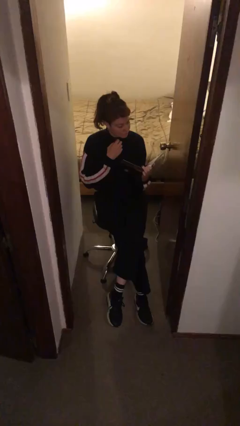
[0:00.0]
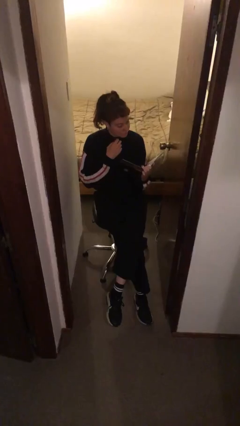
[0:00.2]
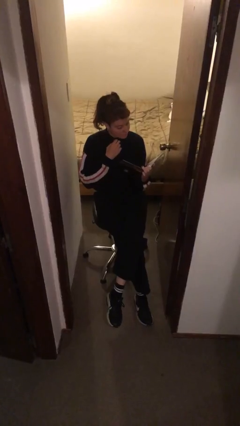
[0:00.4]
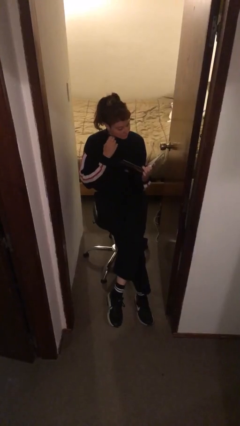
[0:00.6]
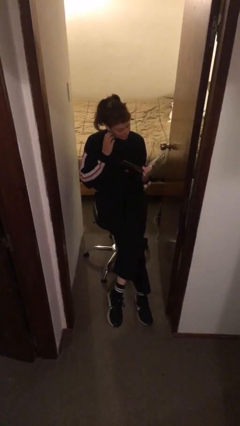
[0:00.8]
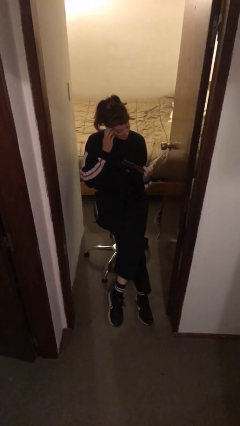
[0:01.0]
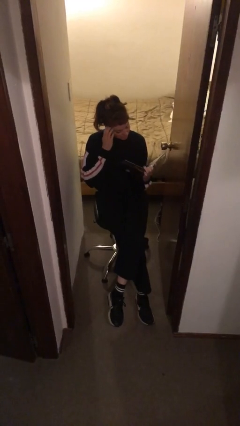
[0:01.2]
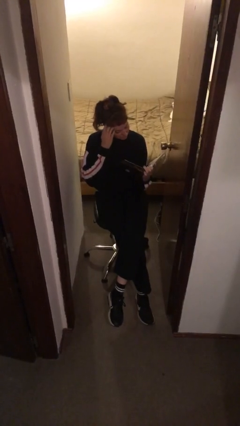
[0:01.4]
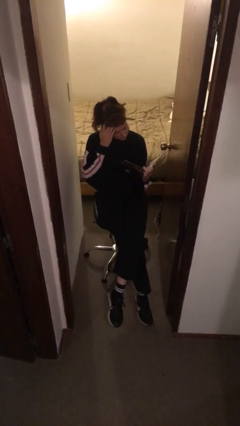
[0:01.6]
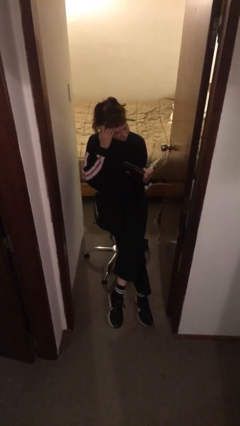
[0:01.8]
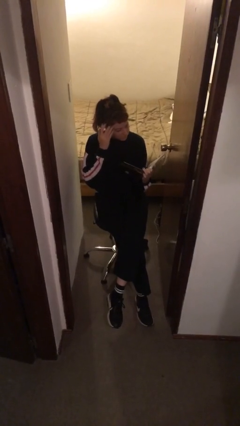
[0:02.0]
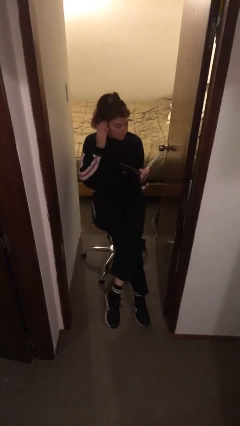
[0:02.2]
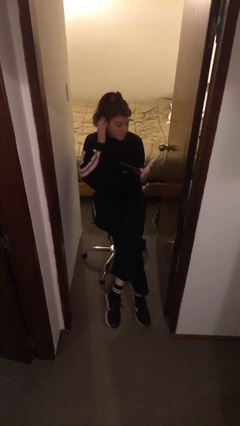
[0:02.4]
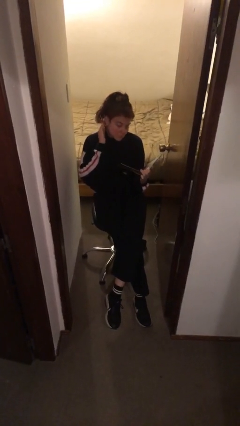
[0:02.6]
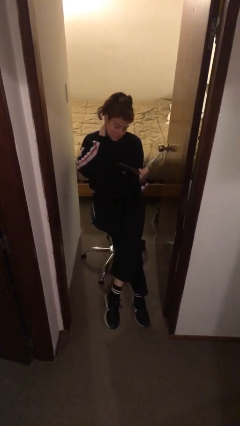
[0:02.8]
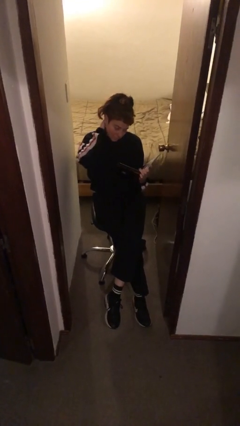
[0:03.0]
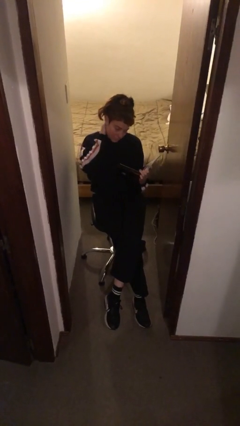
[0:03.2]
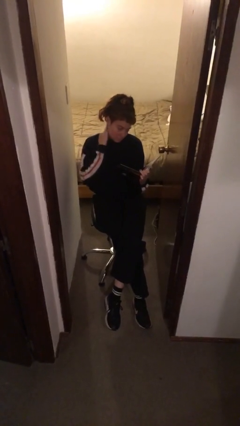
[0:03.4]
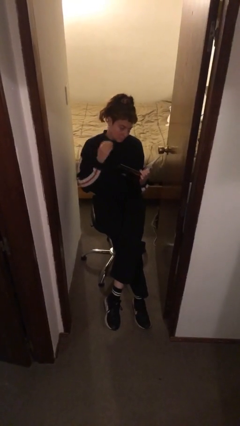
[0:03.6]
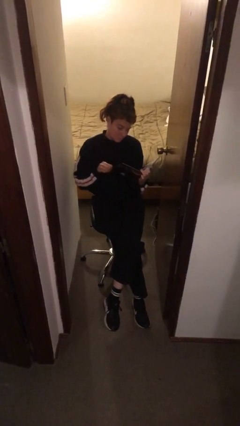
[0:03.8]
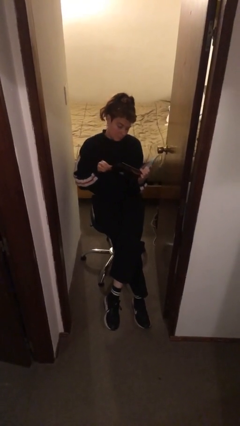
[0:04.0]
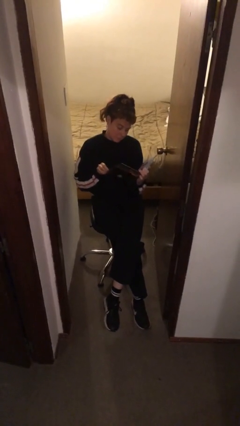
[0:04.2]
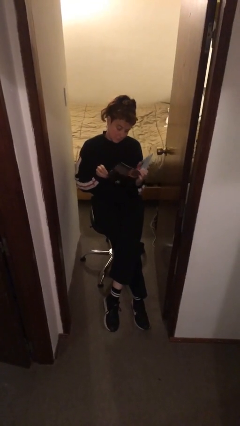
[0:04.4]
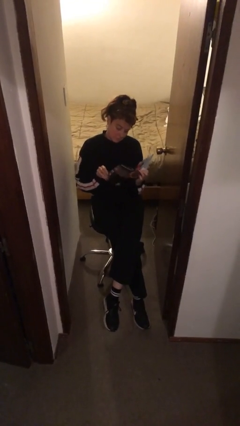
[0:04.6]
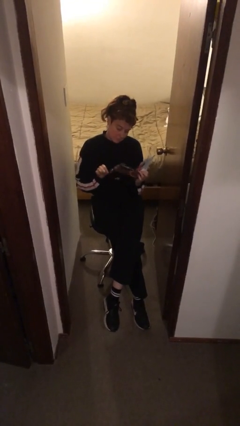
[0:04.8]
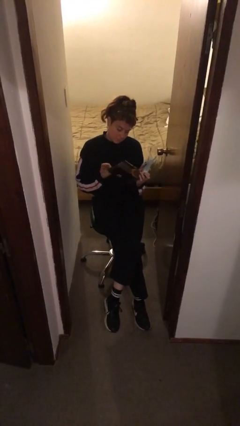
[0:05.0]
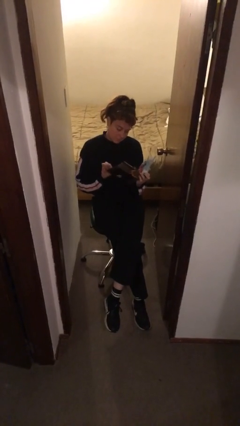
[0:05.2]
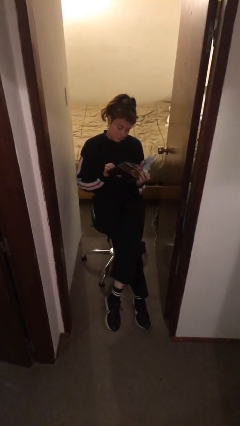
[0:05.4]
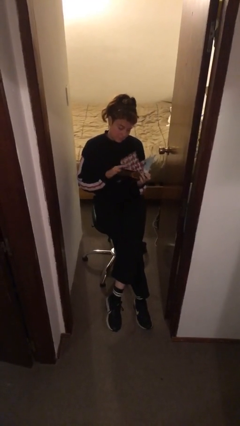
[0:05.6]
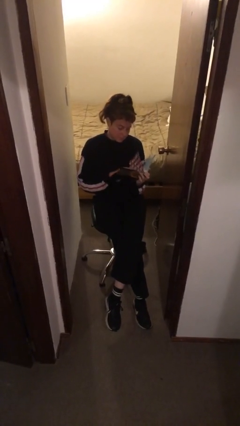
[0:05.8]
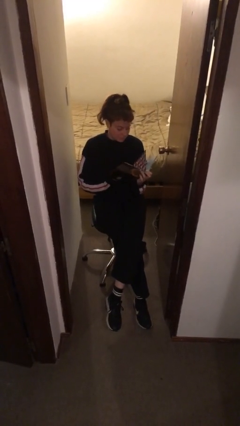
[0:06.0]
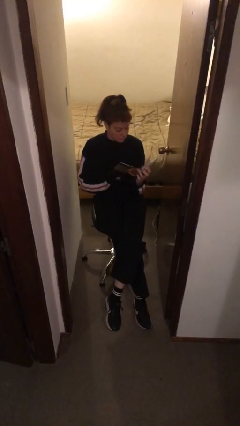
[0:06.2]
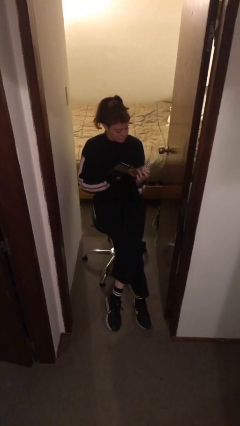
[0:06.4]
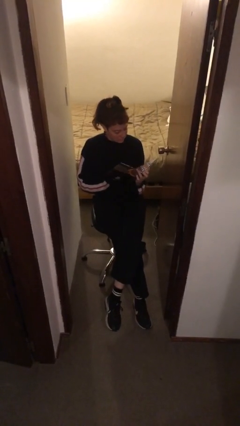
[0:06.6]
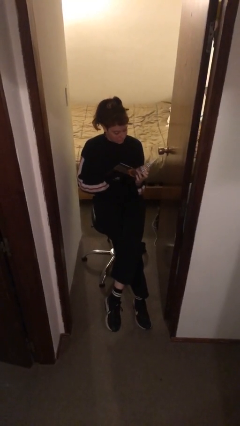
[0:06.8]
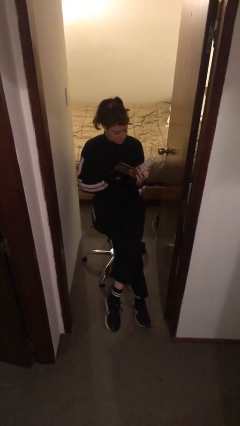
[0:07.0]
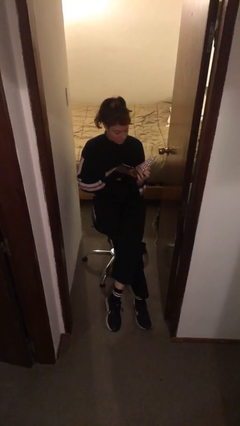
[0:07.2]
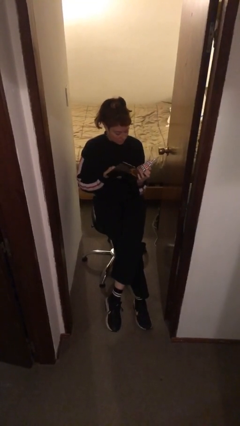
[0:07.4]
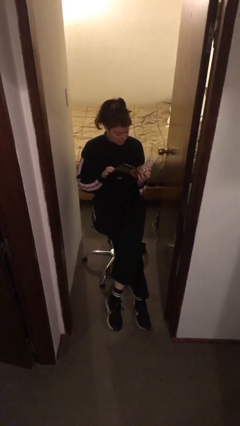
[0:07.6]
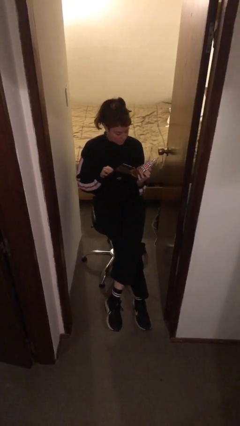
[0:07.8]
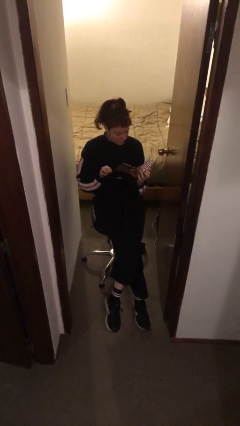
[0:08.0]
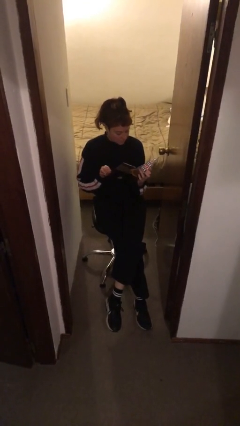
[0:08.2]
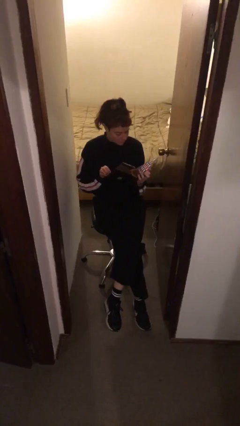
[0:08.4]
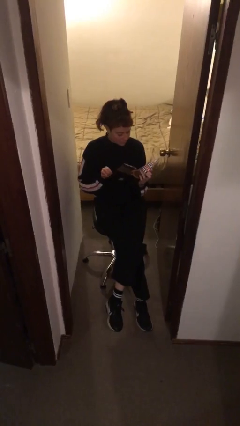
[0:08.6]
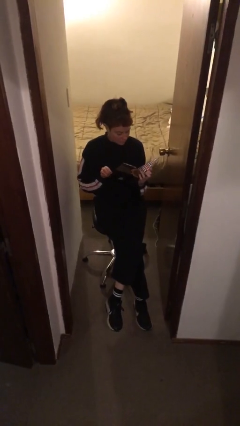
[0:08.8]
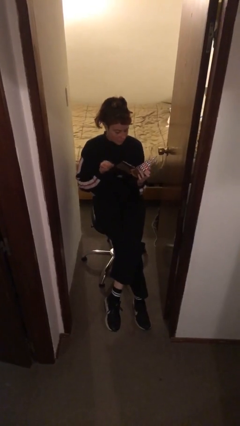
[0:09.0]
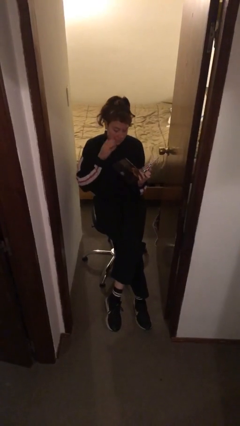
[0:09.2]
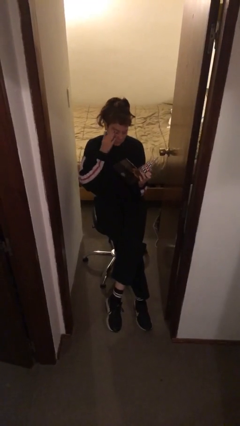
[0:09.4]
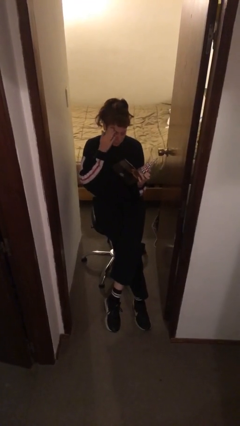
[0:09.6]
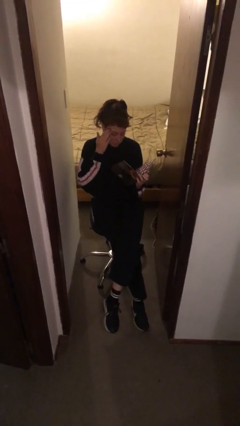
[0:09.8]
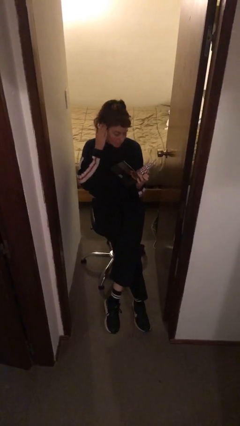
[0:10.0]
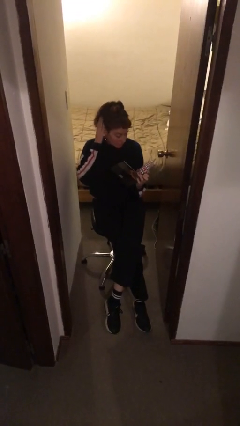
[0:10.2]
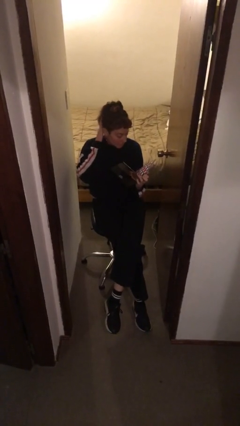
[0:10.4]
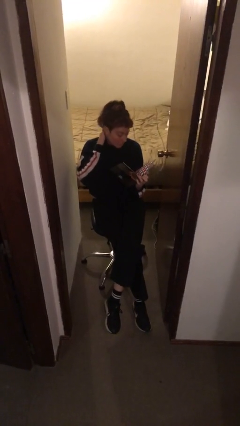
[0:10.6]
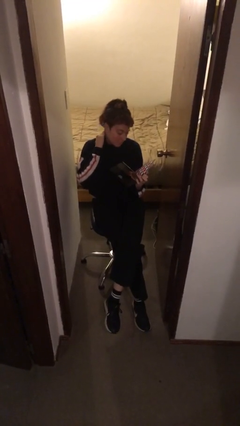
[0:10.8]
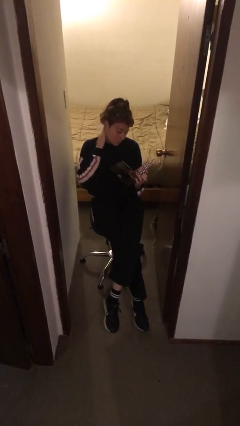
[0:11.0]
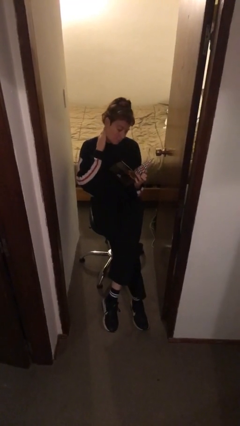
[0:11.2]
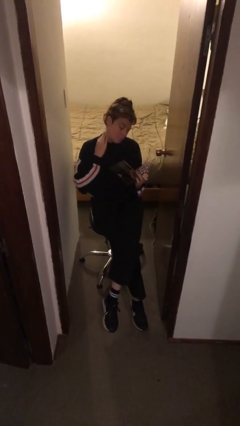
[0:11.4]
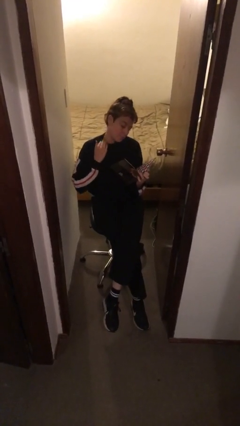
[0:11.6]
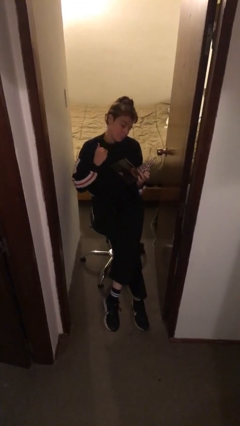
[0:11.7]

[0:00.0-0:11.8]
person reads document

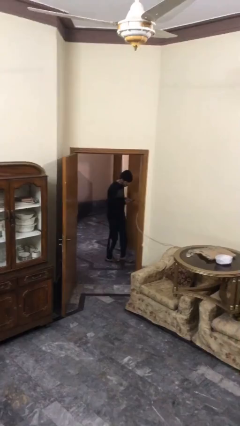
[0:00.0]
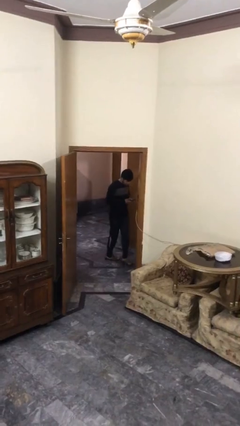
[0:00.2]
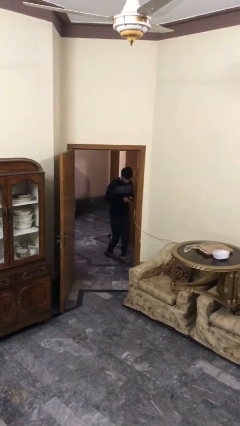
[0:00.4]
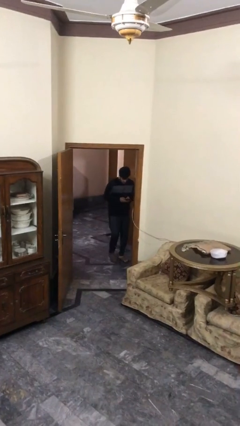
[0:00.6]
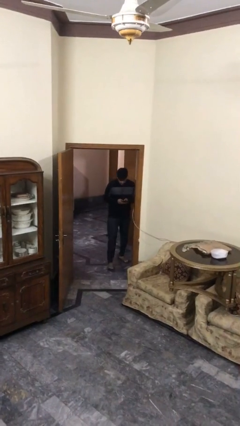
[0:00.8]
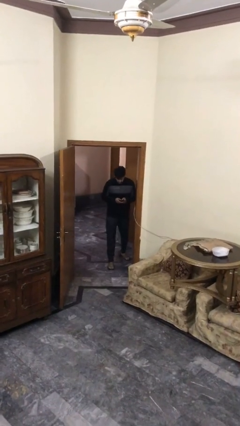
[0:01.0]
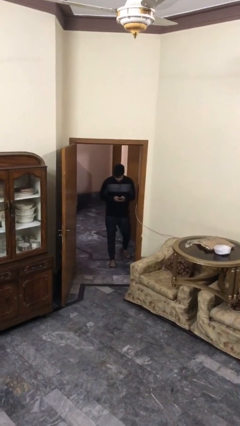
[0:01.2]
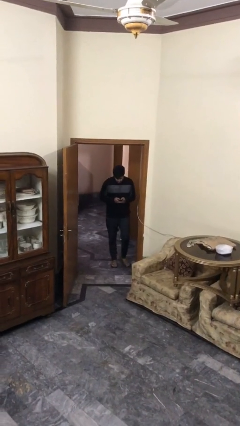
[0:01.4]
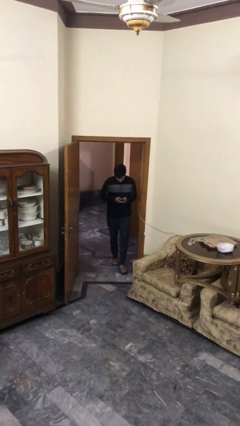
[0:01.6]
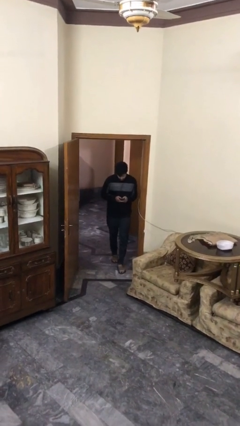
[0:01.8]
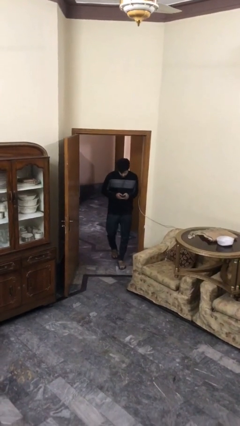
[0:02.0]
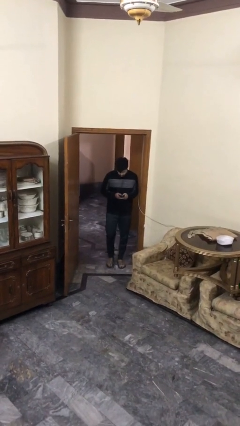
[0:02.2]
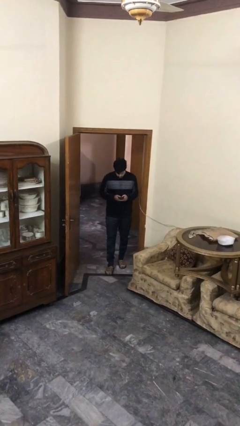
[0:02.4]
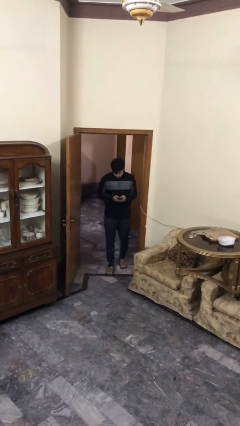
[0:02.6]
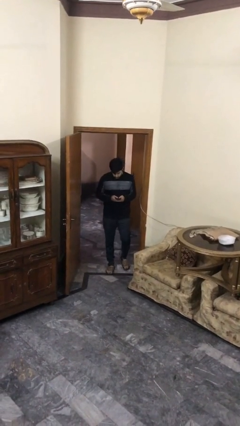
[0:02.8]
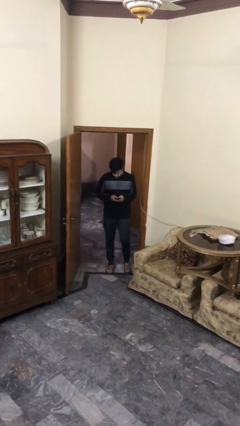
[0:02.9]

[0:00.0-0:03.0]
person enters scene through structure

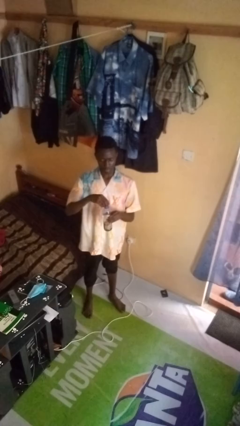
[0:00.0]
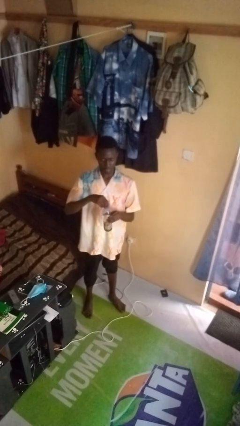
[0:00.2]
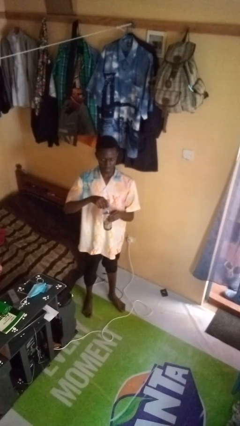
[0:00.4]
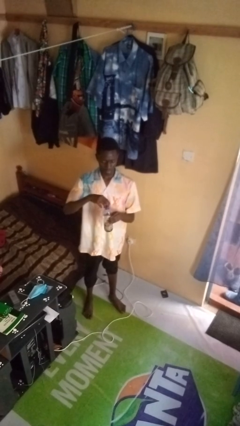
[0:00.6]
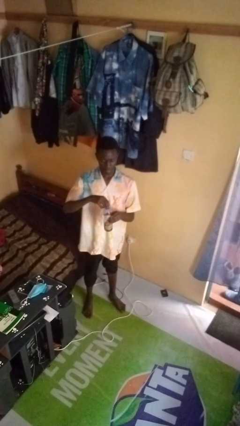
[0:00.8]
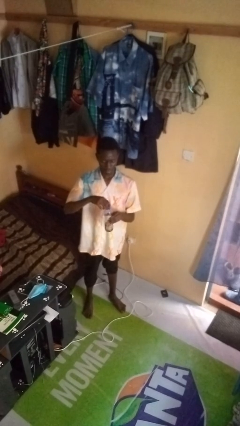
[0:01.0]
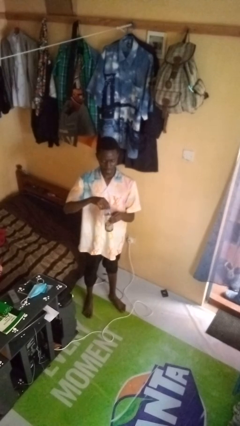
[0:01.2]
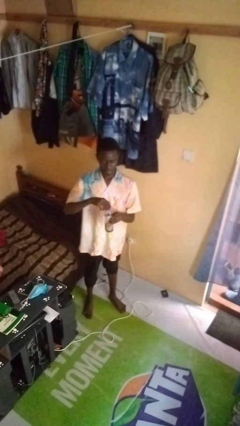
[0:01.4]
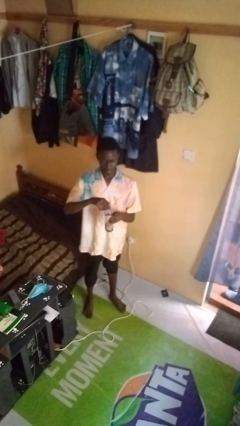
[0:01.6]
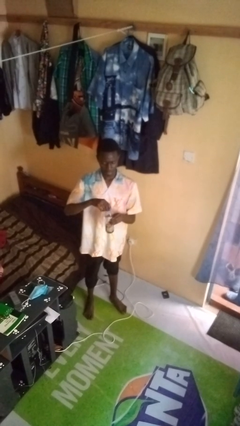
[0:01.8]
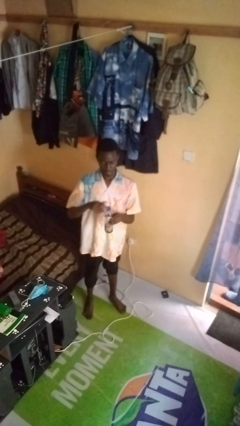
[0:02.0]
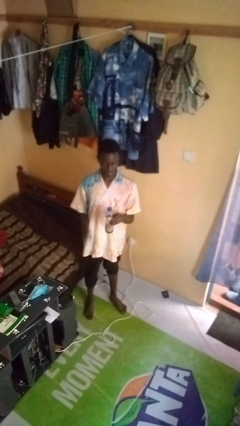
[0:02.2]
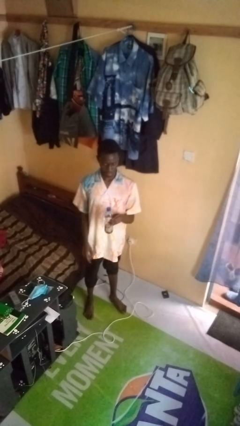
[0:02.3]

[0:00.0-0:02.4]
person screws lid to bottle

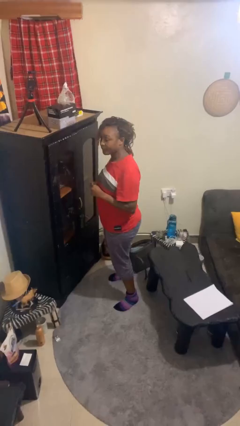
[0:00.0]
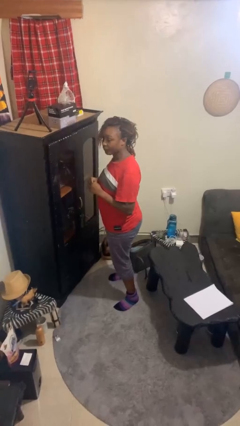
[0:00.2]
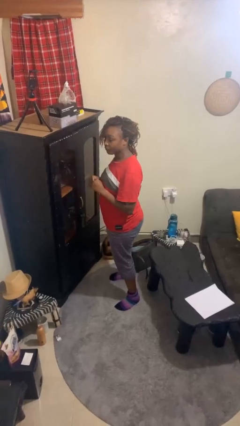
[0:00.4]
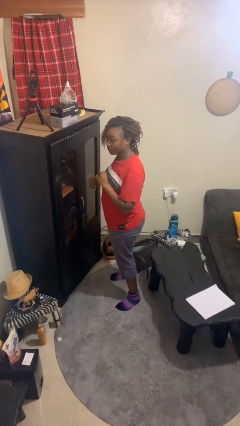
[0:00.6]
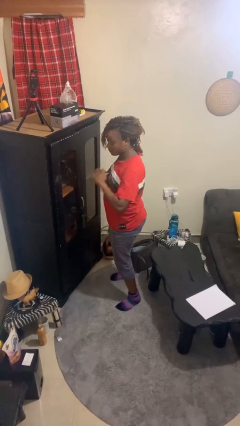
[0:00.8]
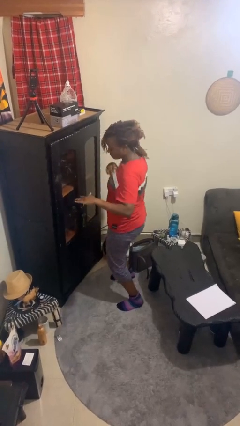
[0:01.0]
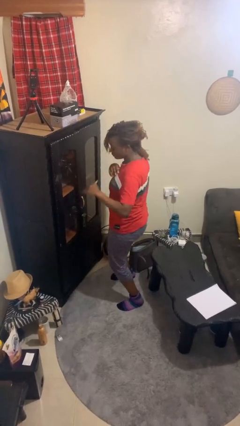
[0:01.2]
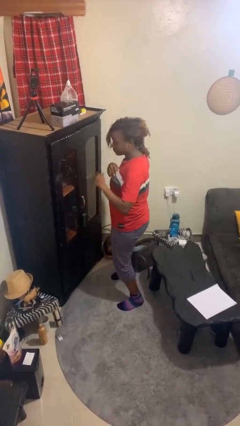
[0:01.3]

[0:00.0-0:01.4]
person karate chop
